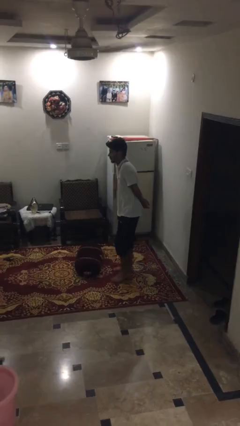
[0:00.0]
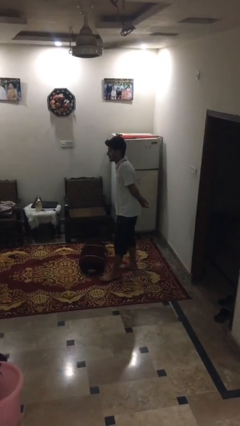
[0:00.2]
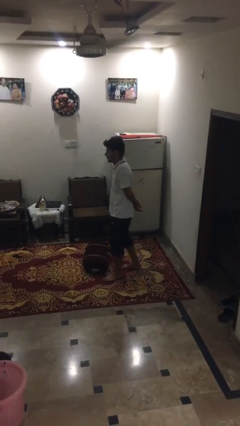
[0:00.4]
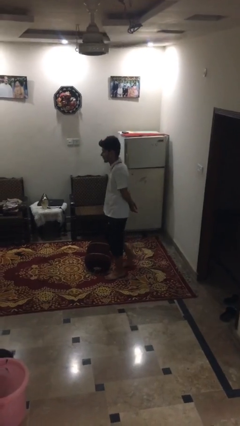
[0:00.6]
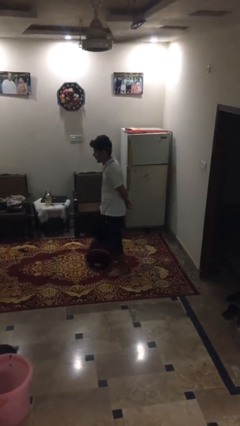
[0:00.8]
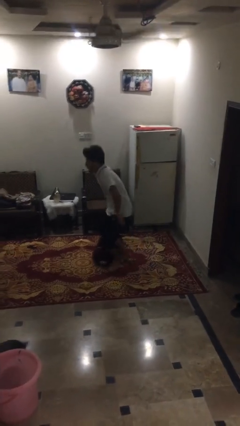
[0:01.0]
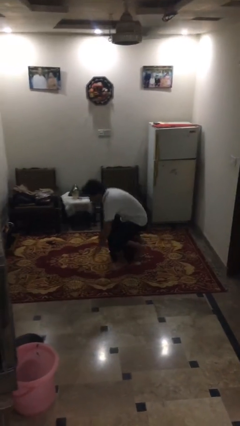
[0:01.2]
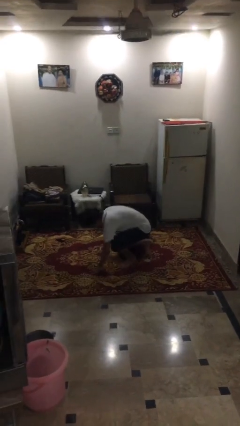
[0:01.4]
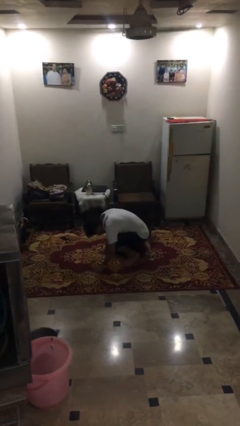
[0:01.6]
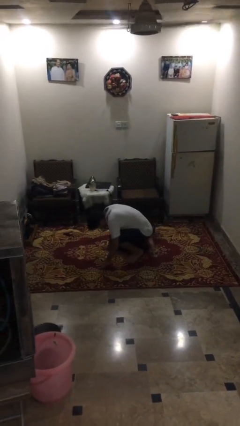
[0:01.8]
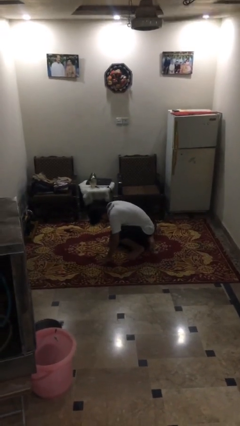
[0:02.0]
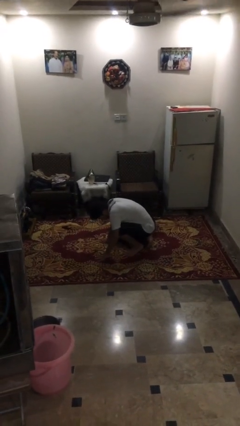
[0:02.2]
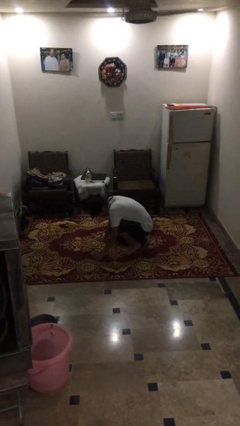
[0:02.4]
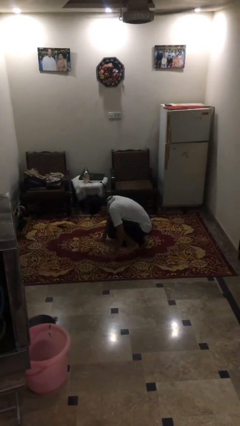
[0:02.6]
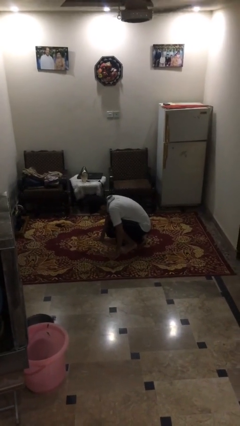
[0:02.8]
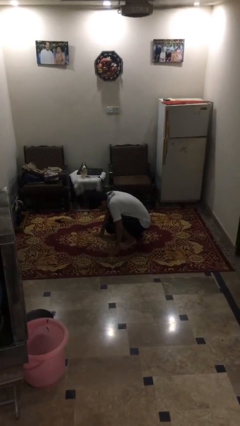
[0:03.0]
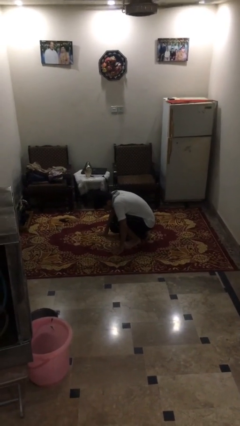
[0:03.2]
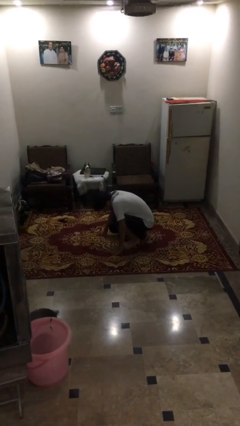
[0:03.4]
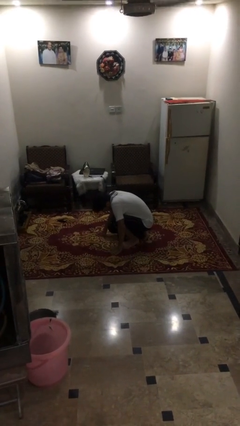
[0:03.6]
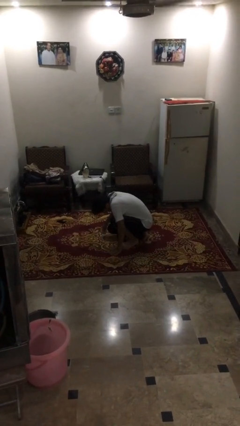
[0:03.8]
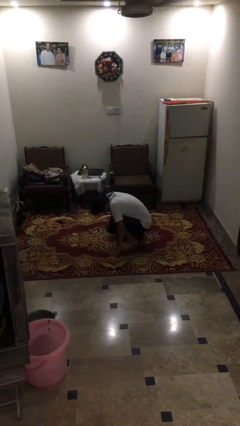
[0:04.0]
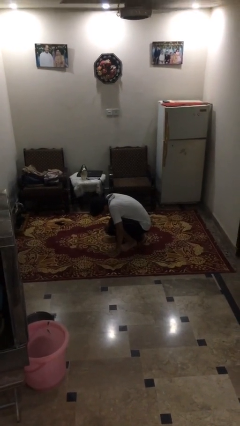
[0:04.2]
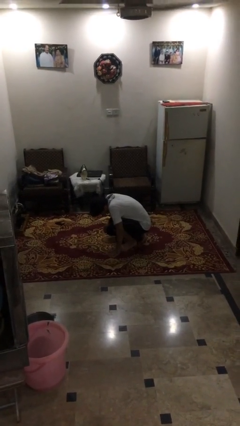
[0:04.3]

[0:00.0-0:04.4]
person trips on object on floor

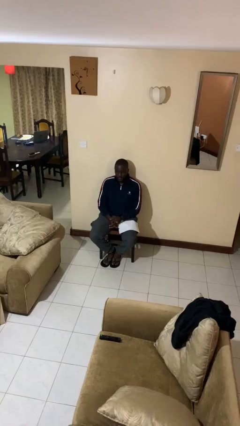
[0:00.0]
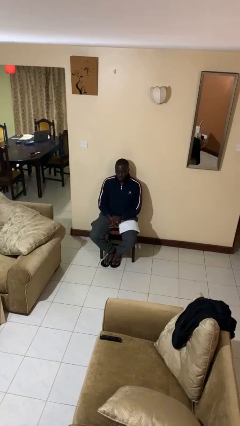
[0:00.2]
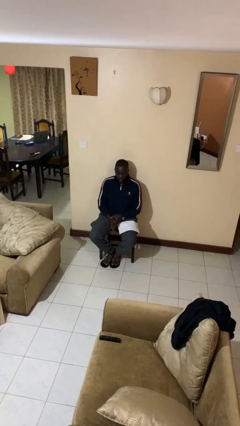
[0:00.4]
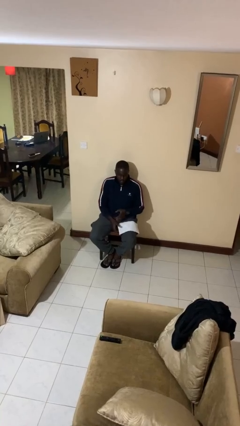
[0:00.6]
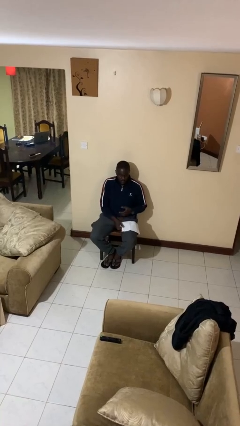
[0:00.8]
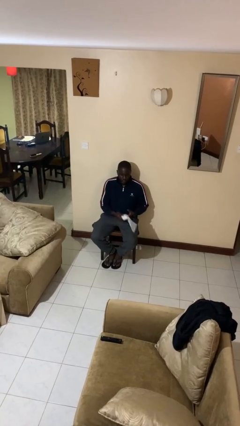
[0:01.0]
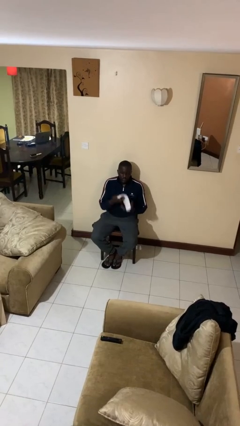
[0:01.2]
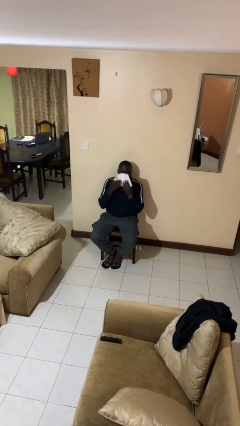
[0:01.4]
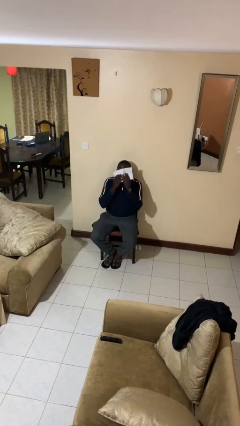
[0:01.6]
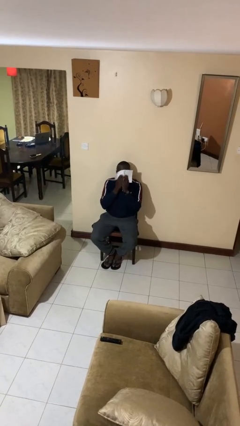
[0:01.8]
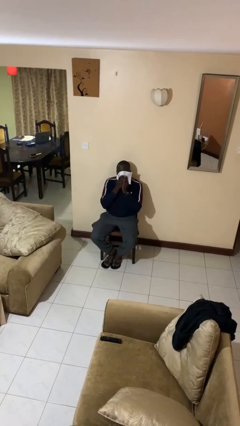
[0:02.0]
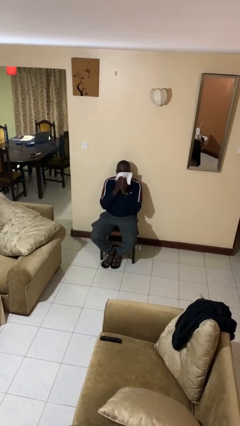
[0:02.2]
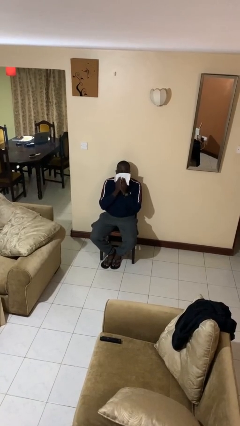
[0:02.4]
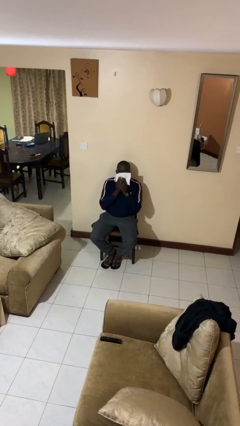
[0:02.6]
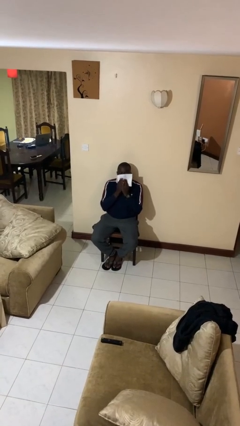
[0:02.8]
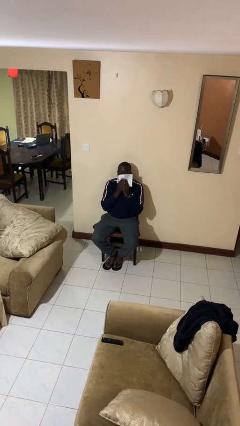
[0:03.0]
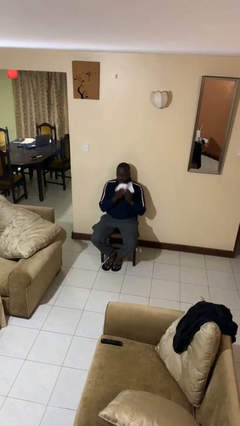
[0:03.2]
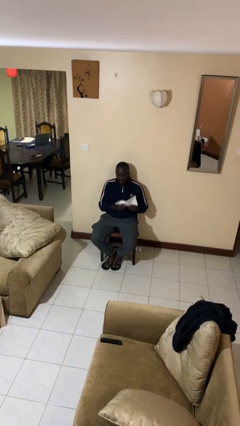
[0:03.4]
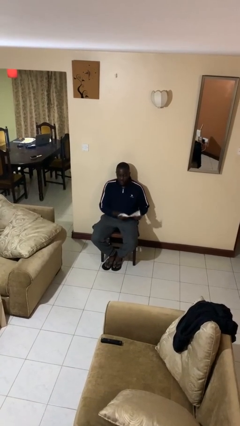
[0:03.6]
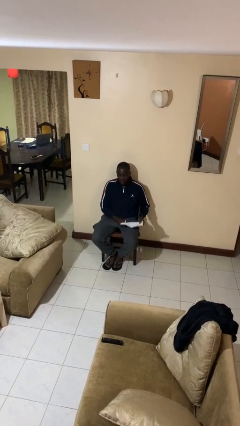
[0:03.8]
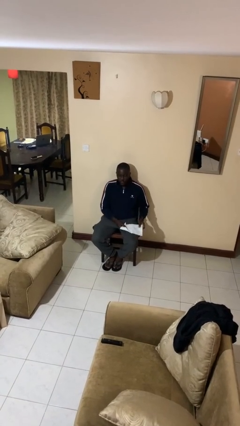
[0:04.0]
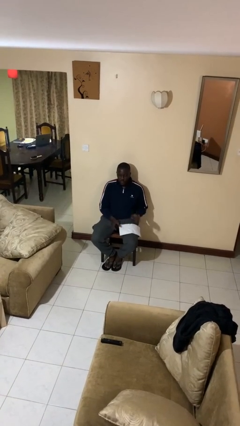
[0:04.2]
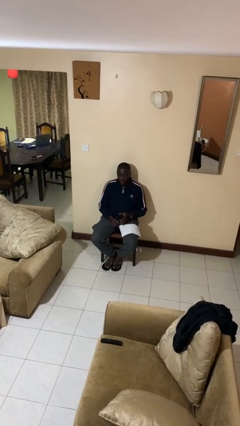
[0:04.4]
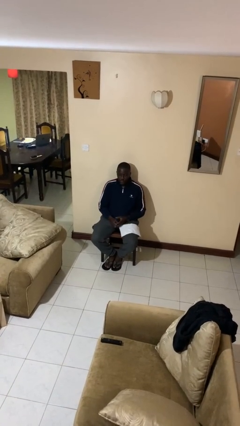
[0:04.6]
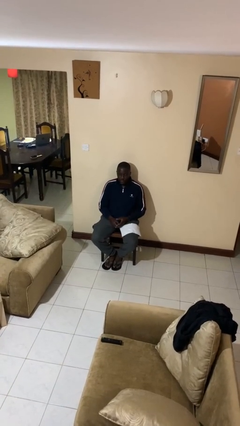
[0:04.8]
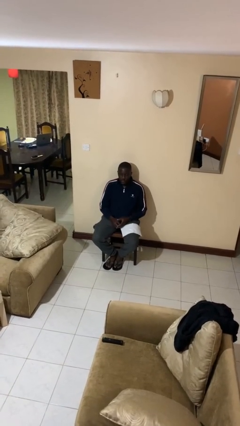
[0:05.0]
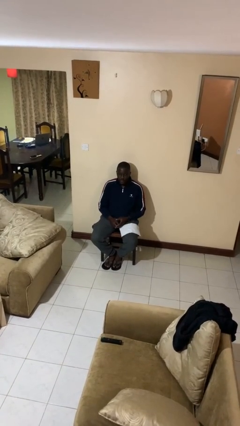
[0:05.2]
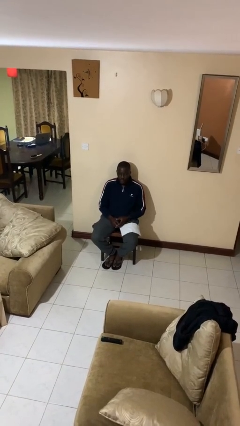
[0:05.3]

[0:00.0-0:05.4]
person wipes mouth with napkin

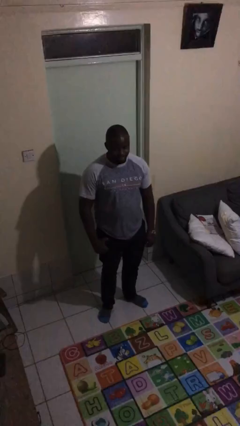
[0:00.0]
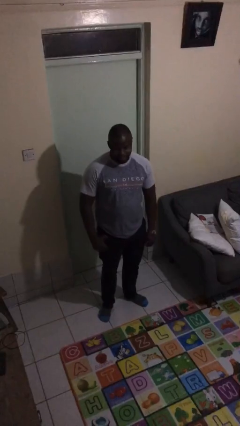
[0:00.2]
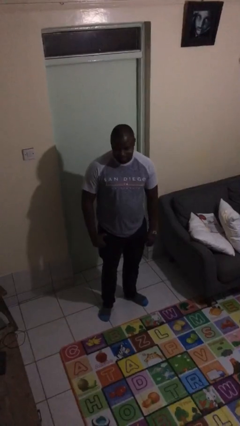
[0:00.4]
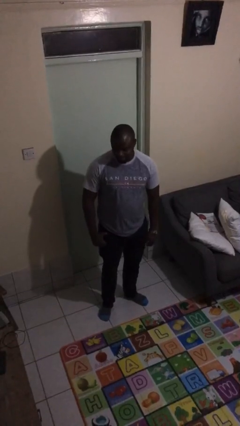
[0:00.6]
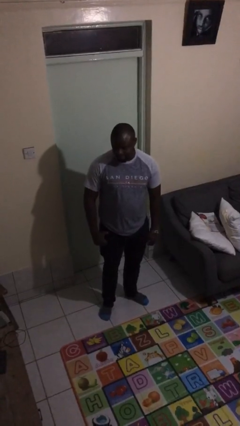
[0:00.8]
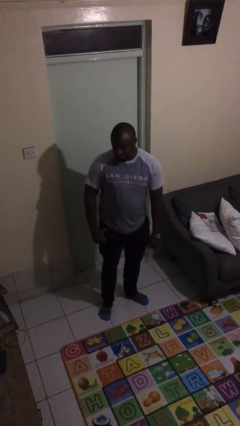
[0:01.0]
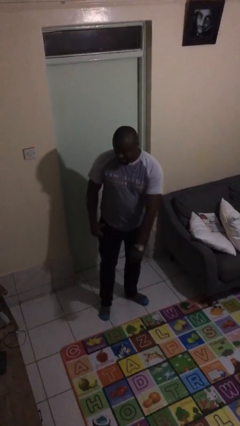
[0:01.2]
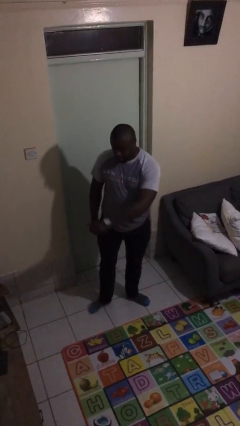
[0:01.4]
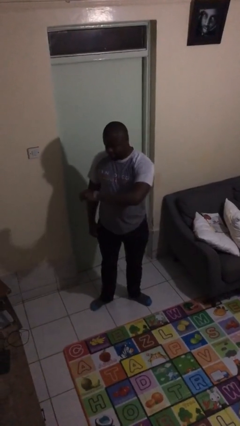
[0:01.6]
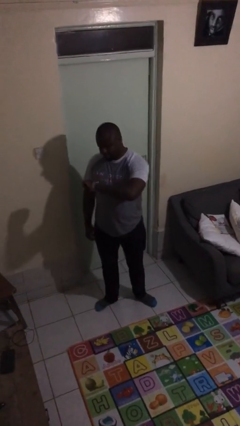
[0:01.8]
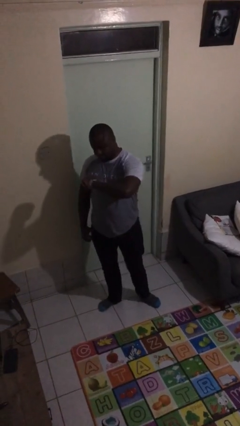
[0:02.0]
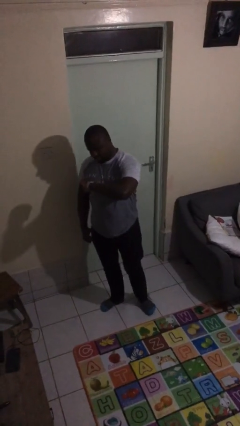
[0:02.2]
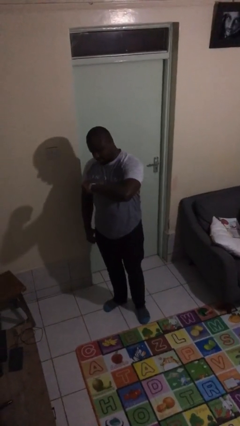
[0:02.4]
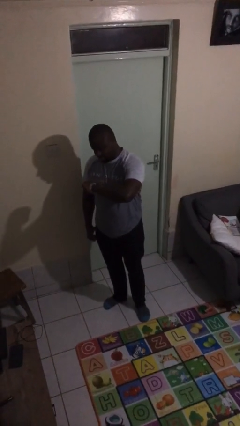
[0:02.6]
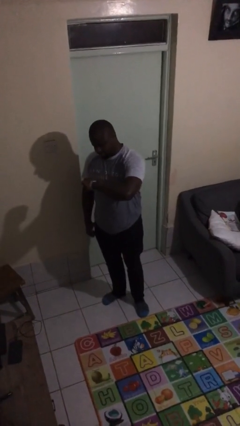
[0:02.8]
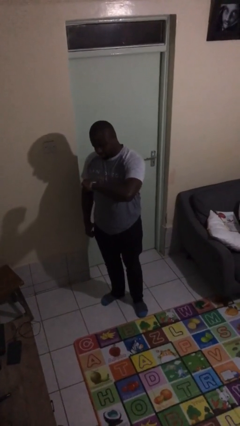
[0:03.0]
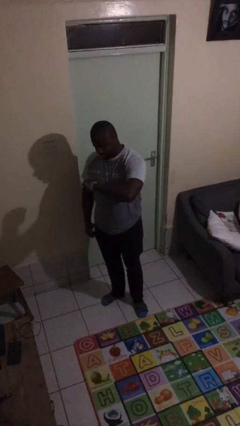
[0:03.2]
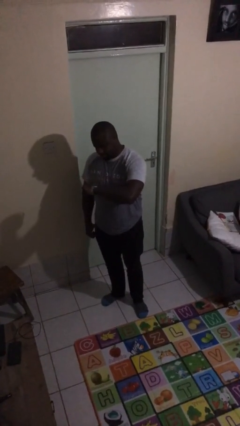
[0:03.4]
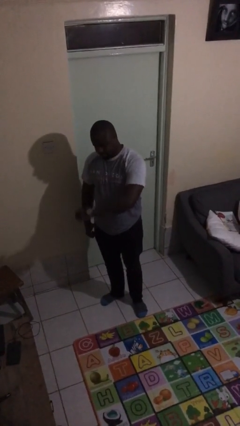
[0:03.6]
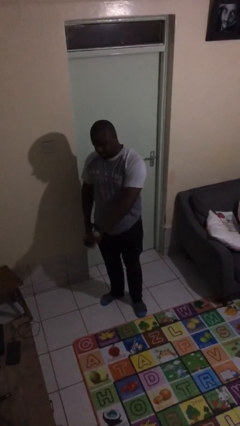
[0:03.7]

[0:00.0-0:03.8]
person looks at wristwatch

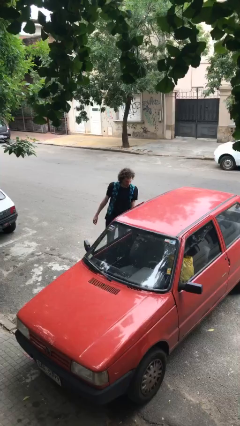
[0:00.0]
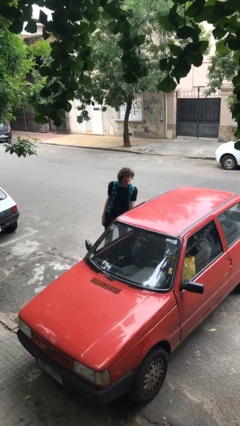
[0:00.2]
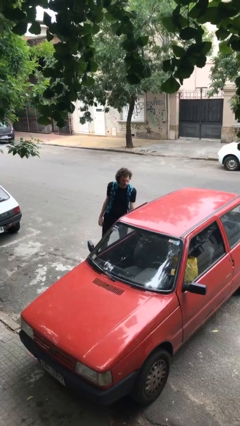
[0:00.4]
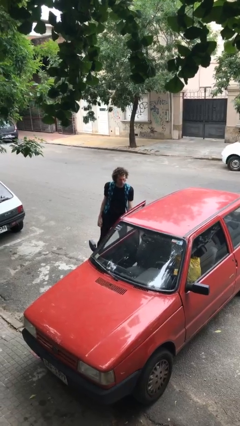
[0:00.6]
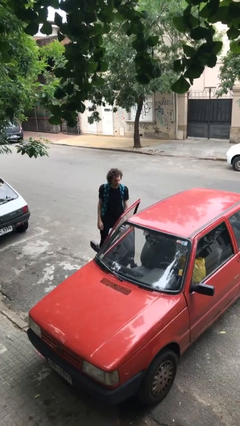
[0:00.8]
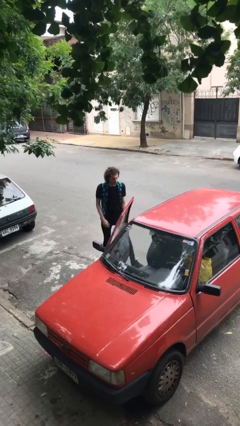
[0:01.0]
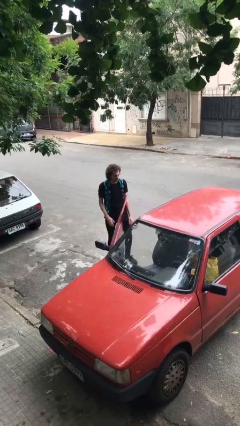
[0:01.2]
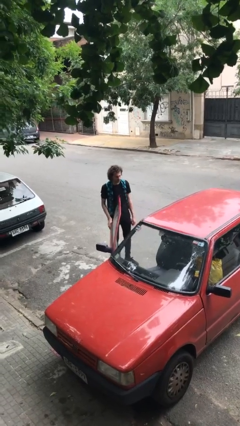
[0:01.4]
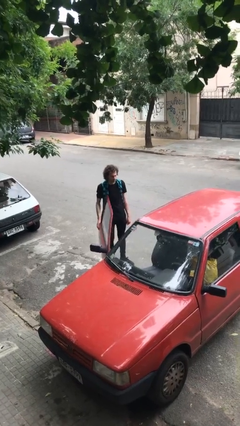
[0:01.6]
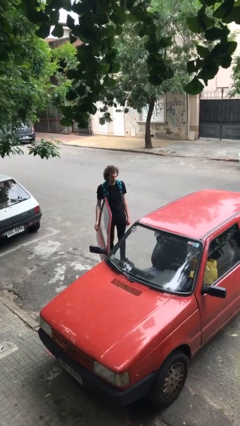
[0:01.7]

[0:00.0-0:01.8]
person opens car trunk

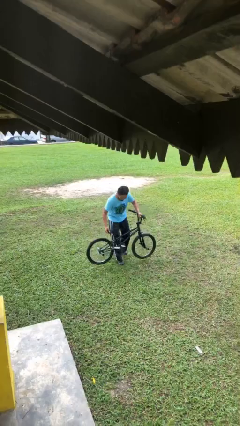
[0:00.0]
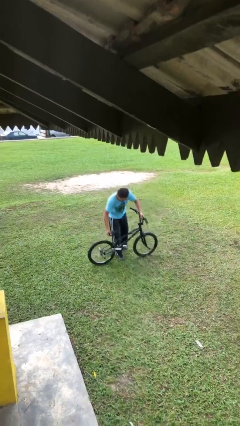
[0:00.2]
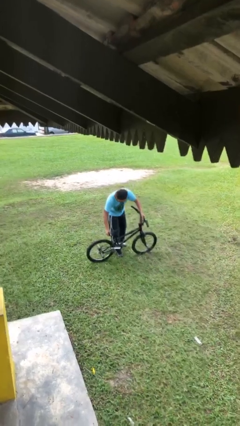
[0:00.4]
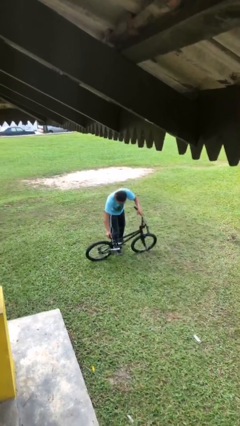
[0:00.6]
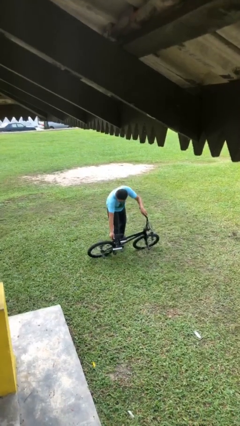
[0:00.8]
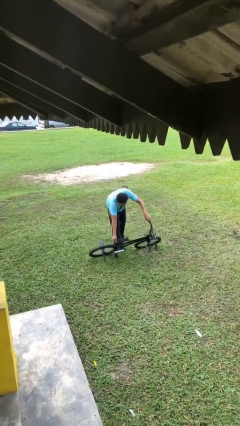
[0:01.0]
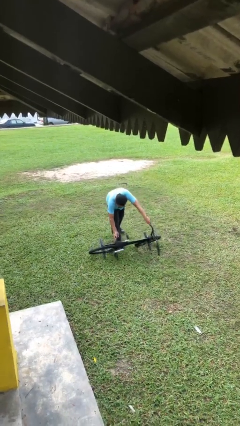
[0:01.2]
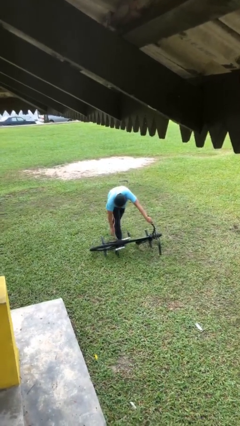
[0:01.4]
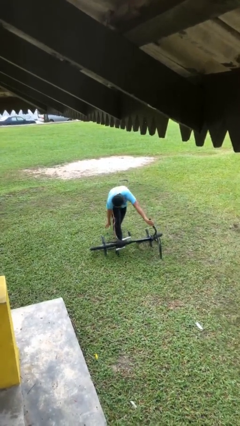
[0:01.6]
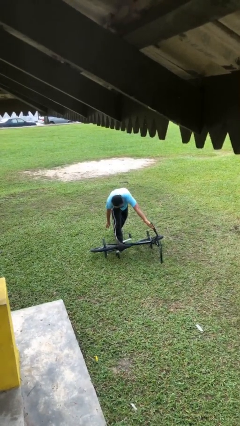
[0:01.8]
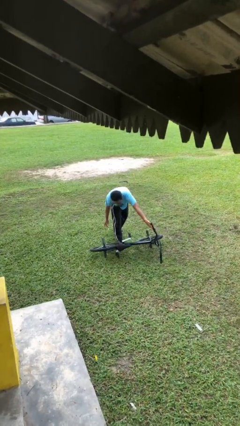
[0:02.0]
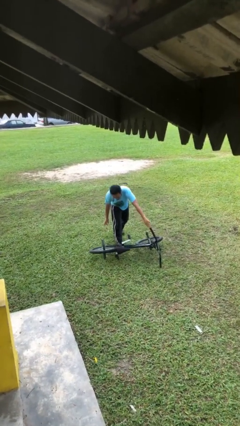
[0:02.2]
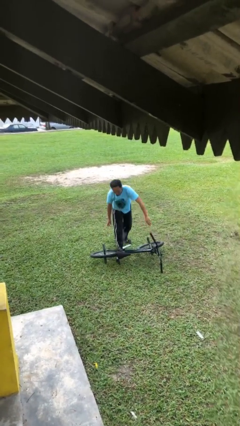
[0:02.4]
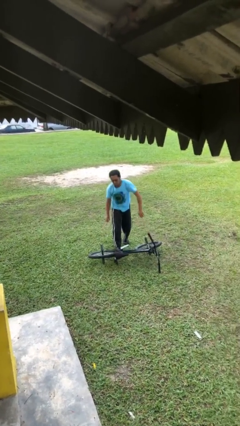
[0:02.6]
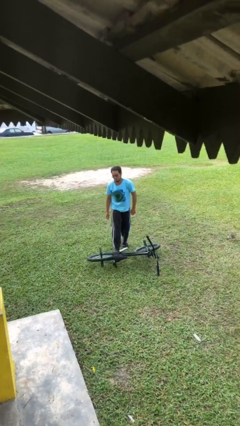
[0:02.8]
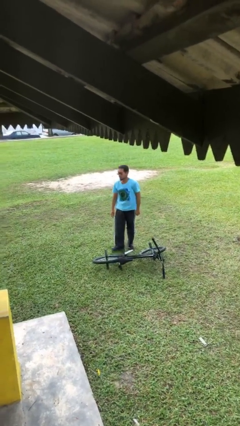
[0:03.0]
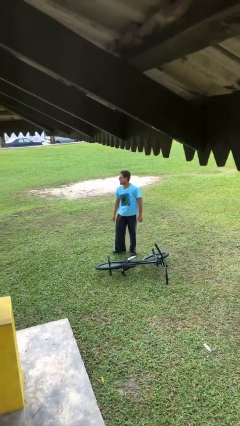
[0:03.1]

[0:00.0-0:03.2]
person puts down object on floor
